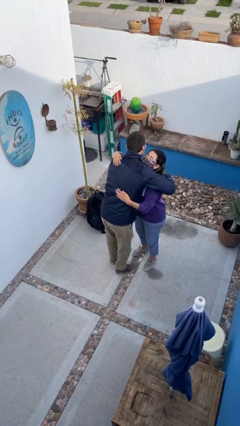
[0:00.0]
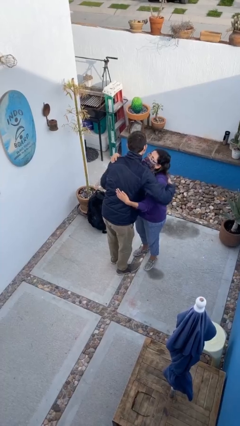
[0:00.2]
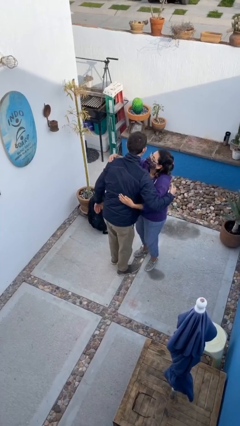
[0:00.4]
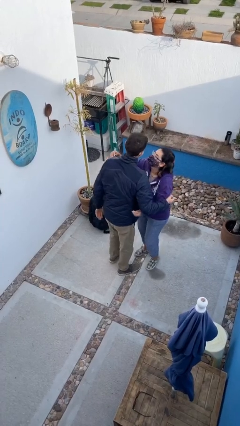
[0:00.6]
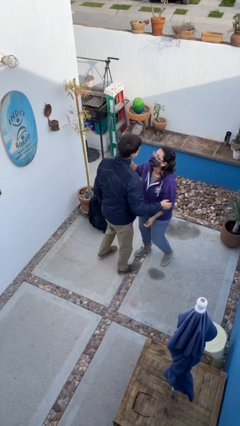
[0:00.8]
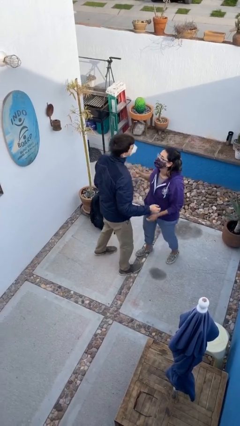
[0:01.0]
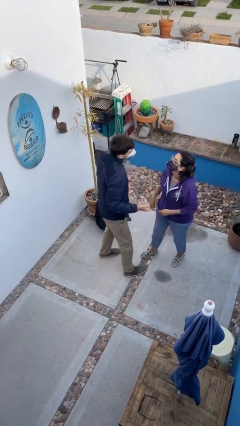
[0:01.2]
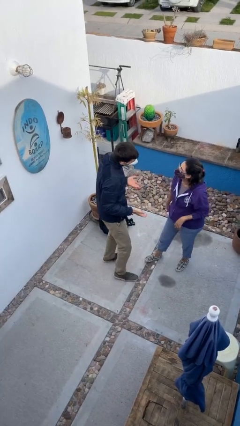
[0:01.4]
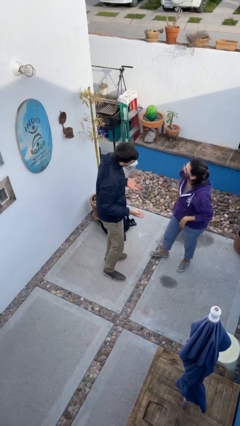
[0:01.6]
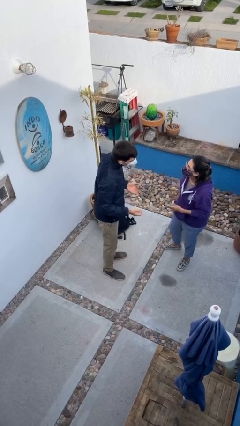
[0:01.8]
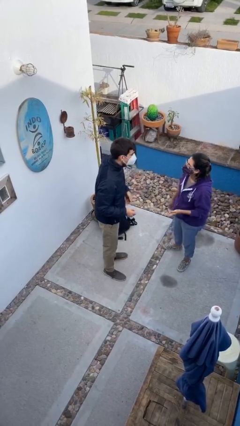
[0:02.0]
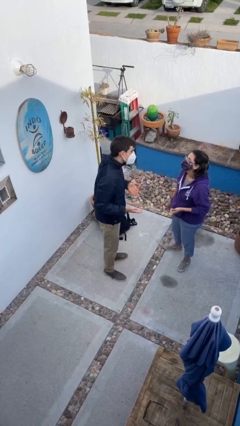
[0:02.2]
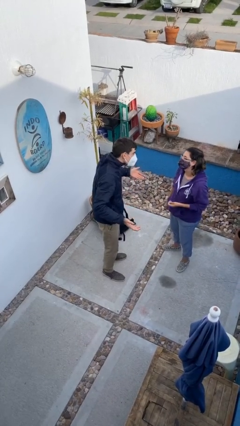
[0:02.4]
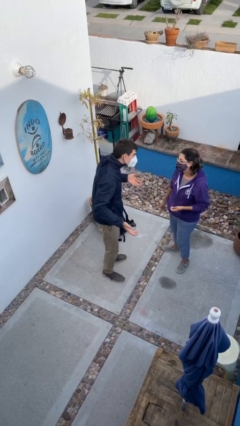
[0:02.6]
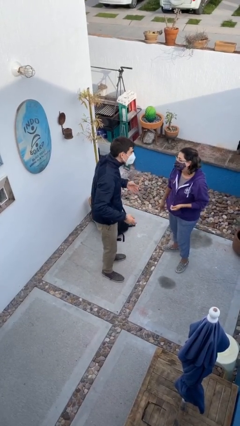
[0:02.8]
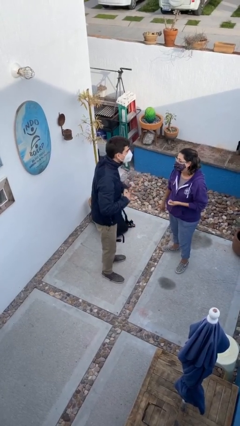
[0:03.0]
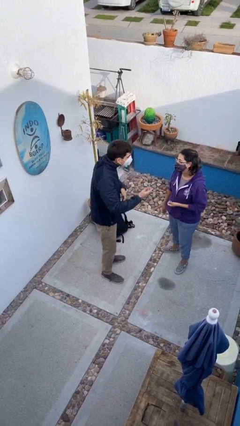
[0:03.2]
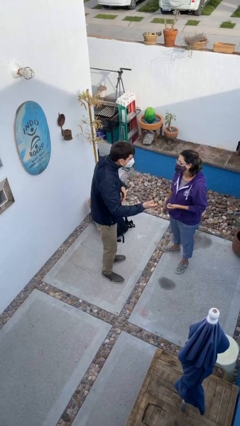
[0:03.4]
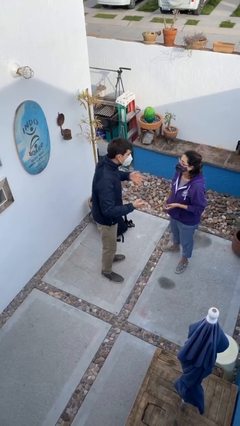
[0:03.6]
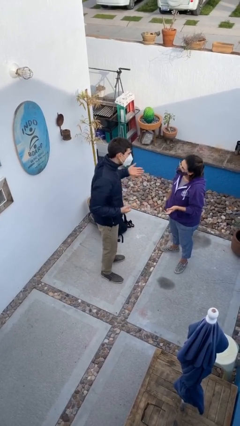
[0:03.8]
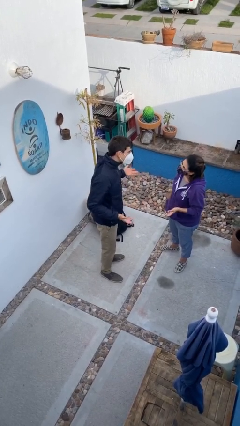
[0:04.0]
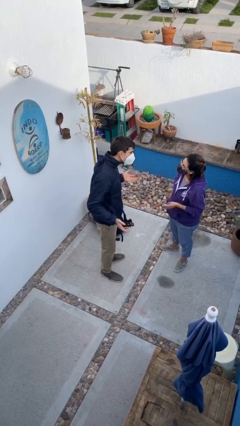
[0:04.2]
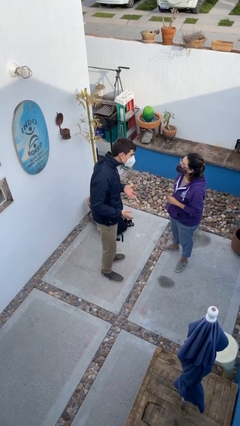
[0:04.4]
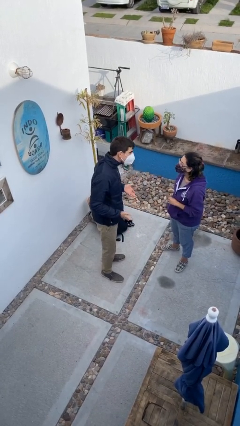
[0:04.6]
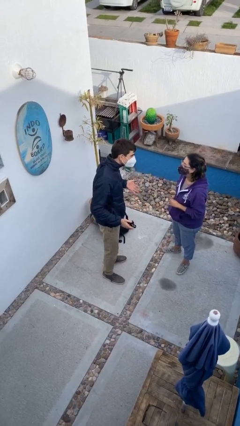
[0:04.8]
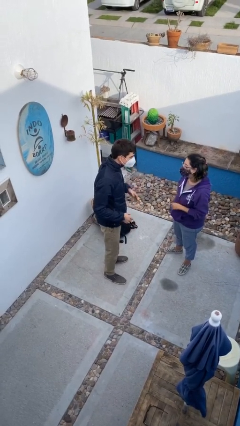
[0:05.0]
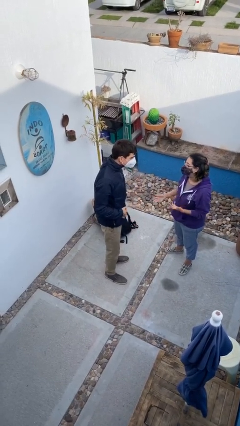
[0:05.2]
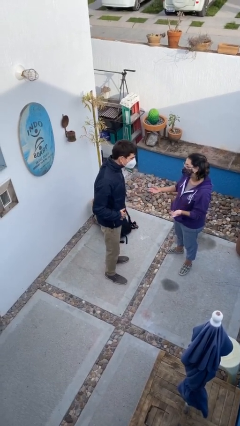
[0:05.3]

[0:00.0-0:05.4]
person talks to person

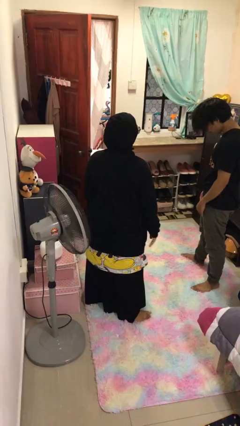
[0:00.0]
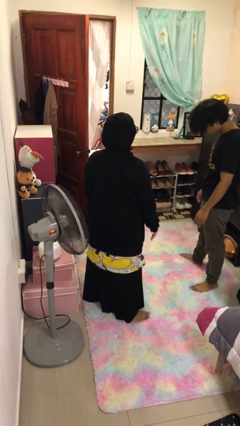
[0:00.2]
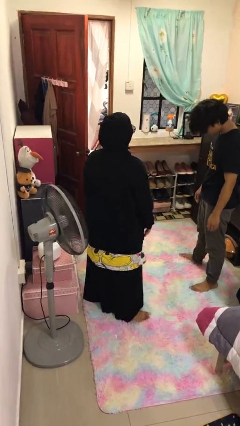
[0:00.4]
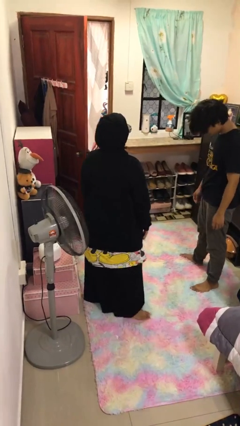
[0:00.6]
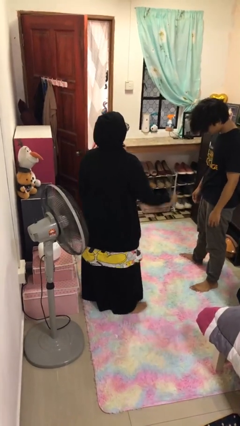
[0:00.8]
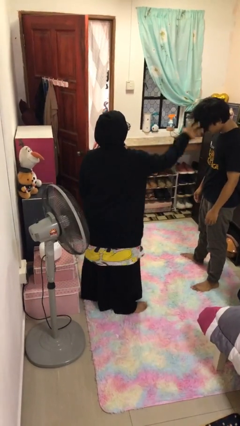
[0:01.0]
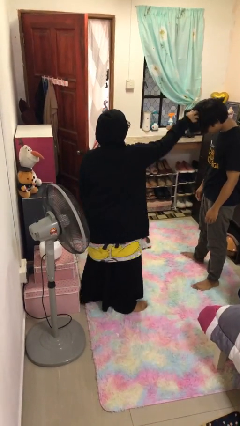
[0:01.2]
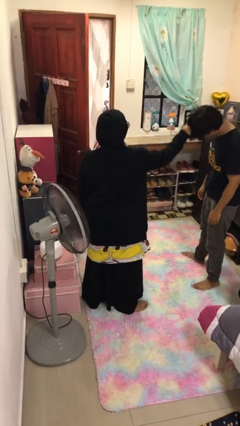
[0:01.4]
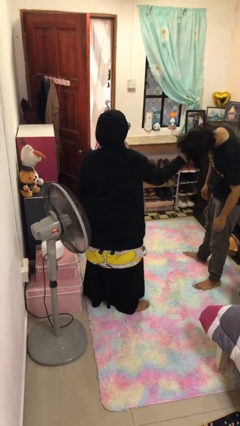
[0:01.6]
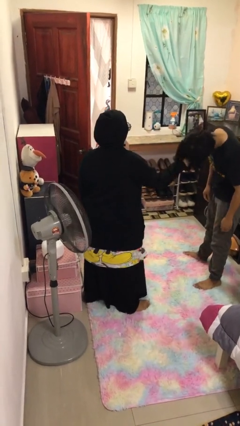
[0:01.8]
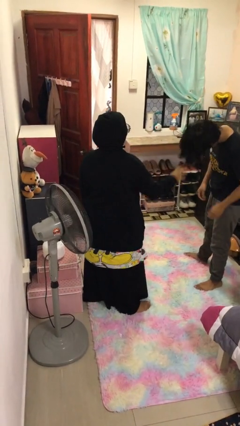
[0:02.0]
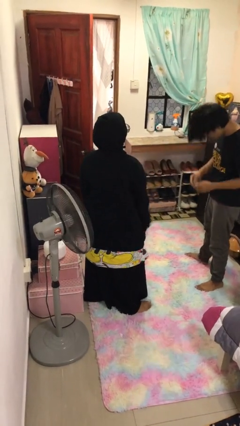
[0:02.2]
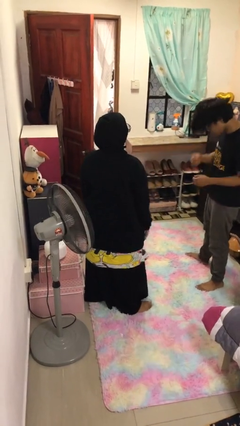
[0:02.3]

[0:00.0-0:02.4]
person grabs person by hair

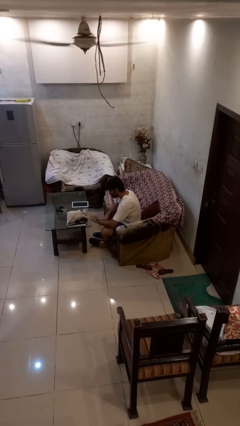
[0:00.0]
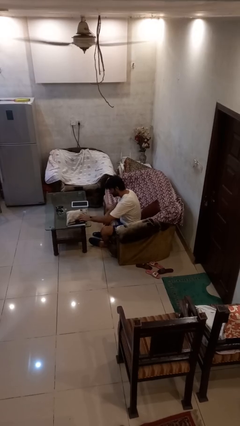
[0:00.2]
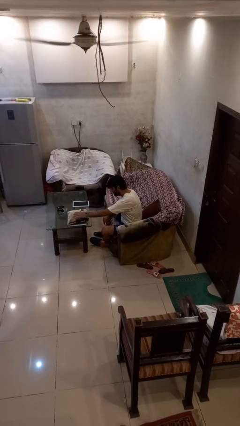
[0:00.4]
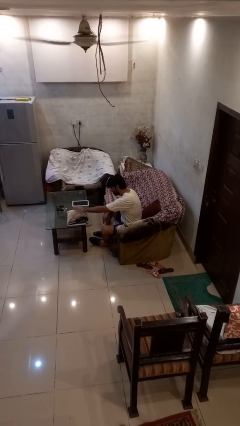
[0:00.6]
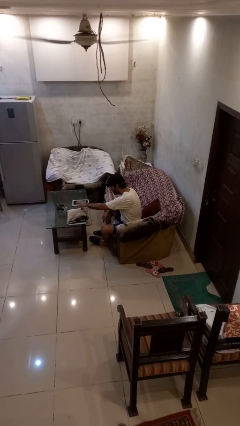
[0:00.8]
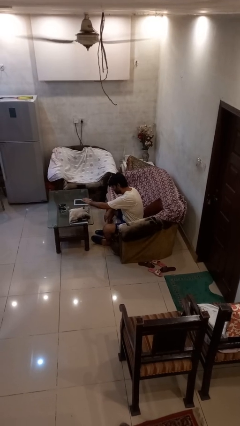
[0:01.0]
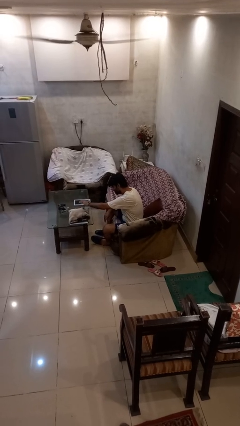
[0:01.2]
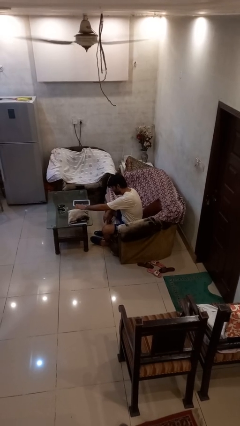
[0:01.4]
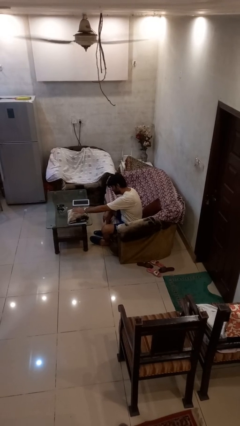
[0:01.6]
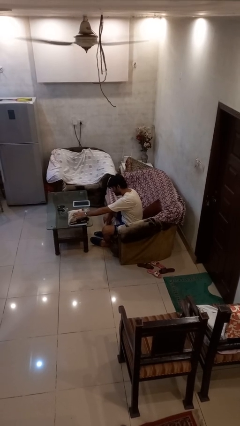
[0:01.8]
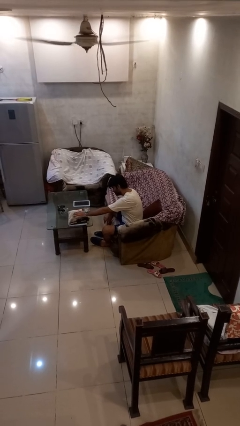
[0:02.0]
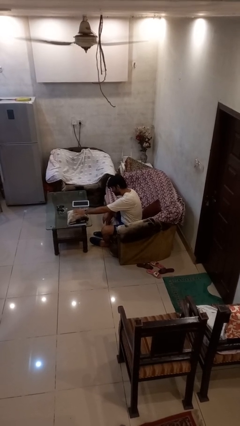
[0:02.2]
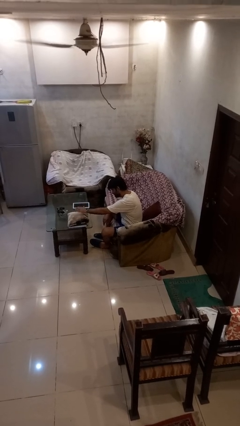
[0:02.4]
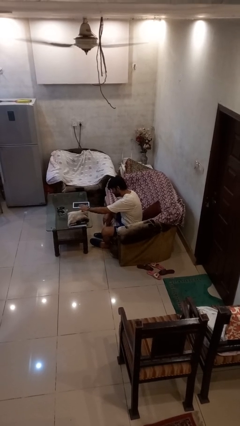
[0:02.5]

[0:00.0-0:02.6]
person waves hand over object

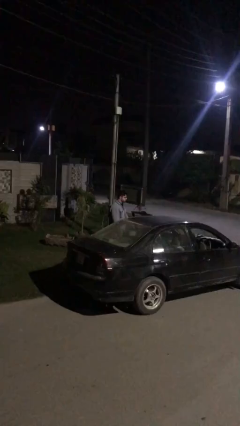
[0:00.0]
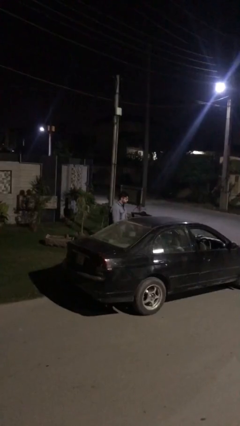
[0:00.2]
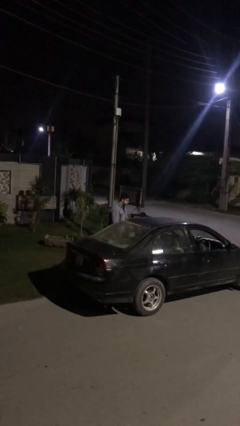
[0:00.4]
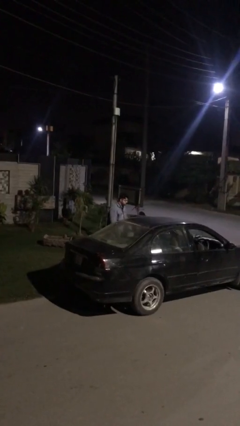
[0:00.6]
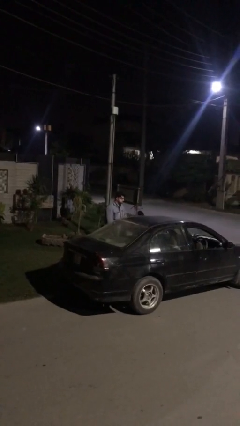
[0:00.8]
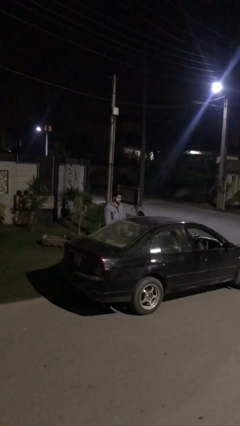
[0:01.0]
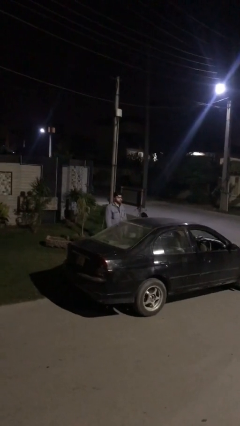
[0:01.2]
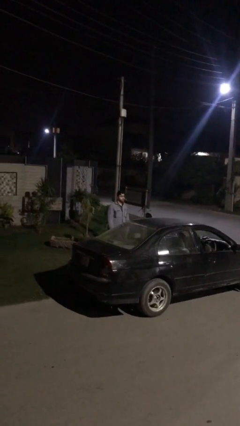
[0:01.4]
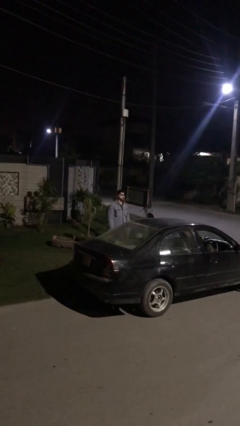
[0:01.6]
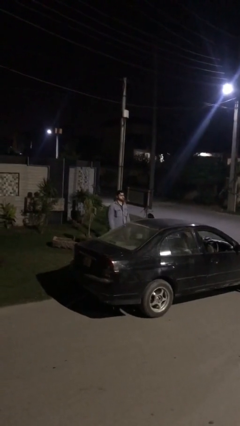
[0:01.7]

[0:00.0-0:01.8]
person closes car door

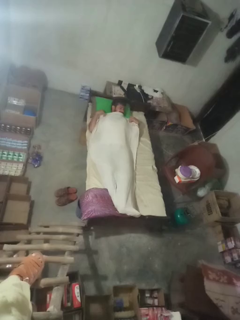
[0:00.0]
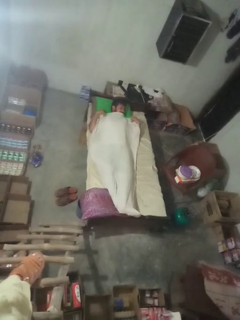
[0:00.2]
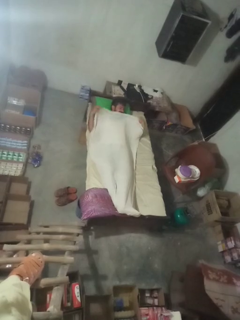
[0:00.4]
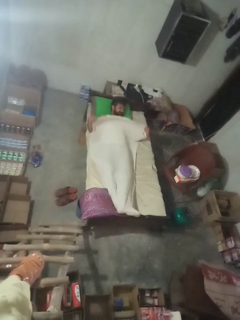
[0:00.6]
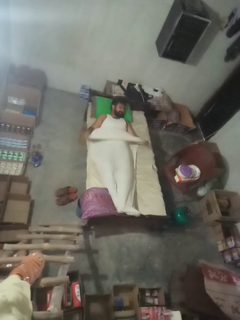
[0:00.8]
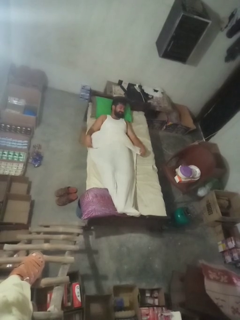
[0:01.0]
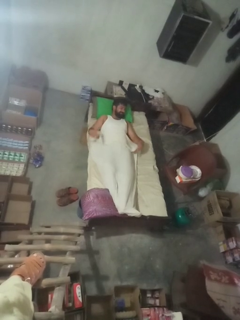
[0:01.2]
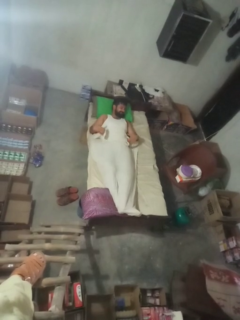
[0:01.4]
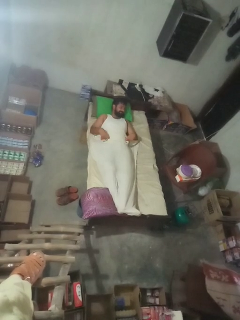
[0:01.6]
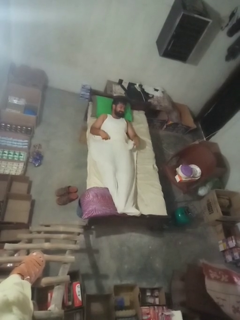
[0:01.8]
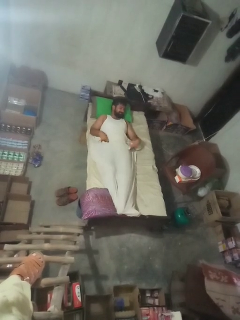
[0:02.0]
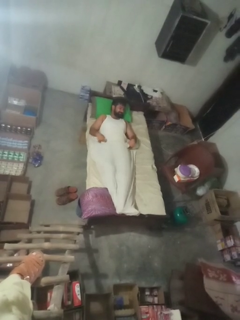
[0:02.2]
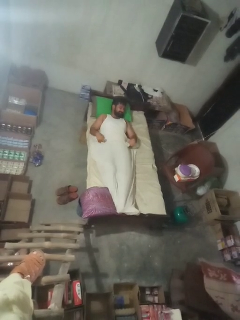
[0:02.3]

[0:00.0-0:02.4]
person uncovers with bedsheets

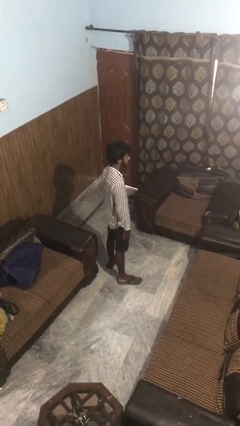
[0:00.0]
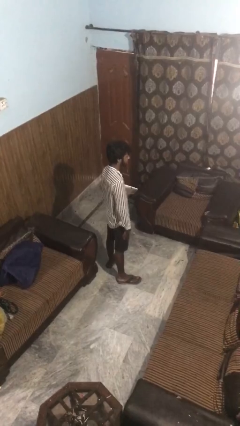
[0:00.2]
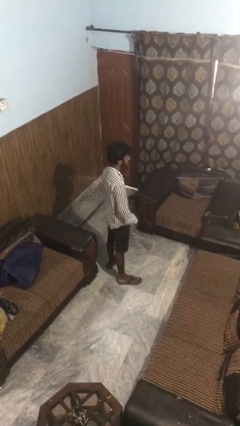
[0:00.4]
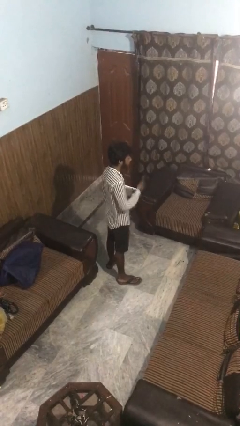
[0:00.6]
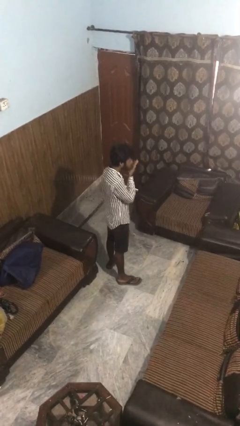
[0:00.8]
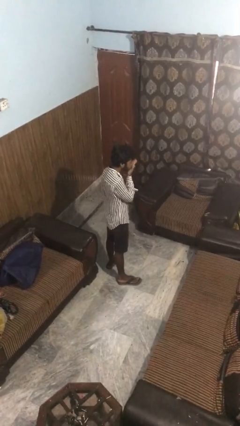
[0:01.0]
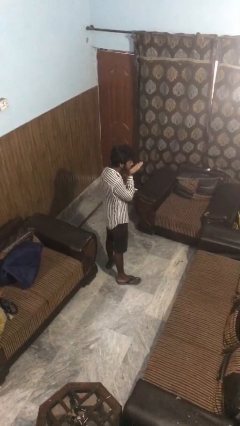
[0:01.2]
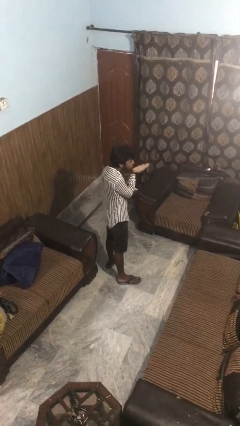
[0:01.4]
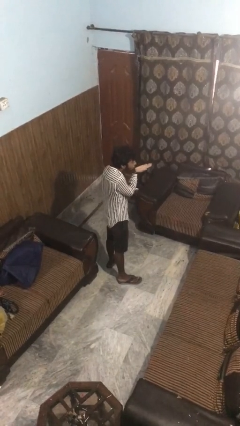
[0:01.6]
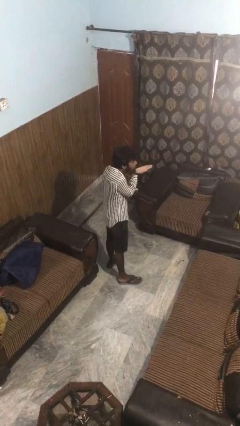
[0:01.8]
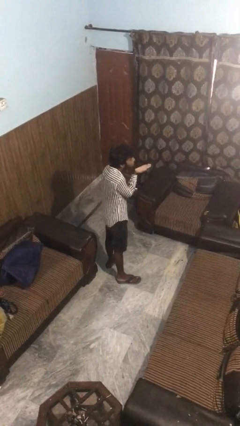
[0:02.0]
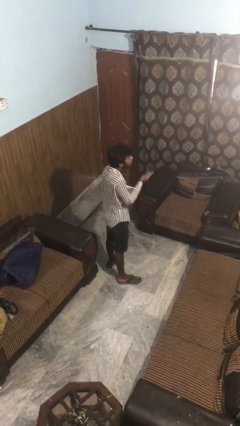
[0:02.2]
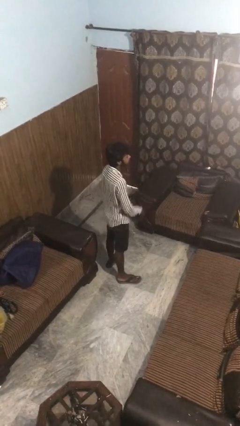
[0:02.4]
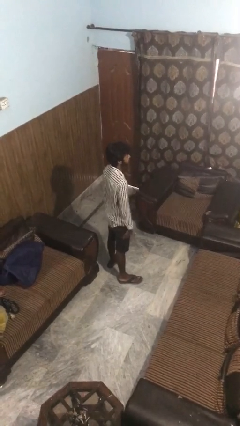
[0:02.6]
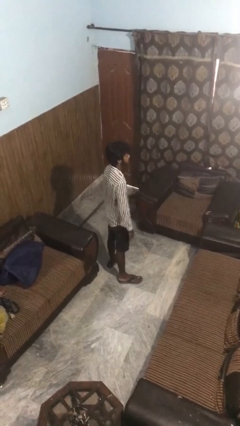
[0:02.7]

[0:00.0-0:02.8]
person gestures blow kiss

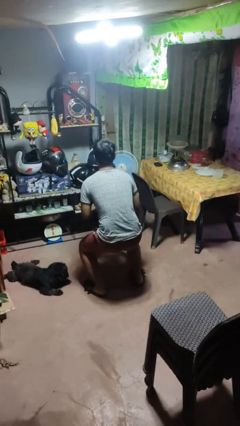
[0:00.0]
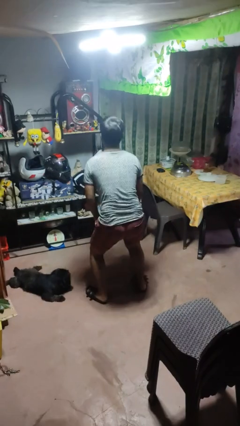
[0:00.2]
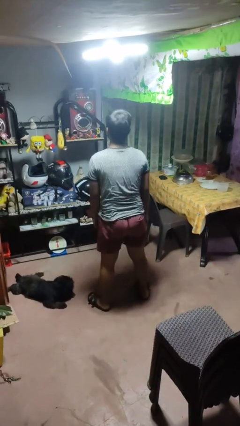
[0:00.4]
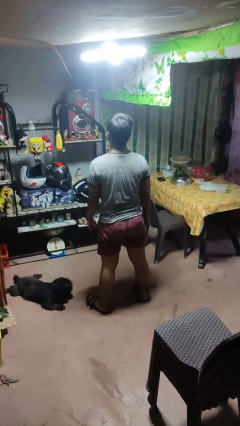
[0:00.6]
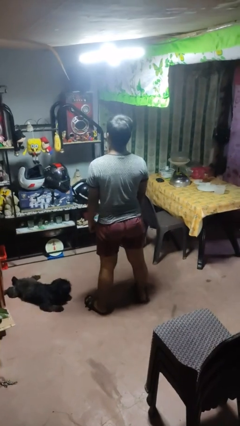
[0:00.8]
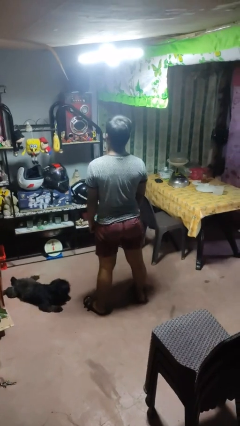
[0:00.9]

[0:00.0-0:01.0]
person stands up
